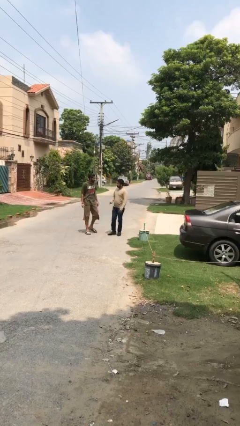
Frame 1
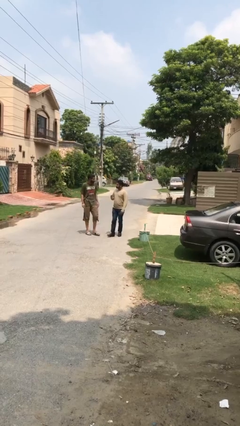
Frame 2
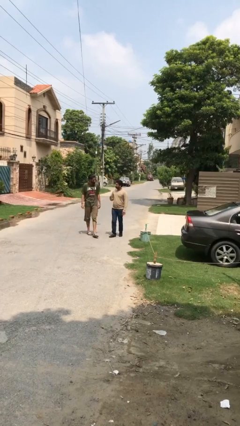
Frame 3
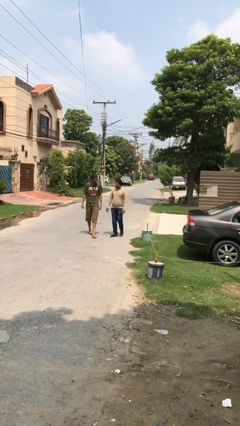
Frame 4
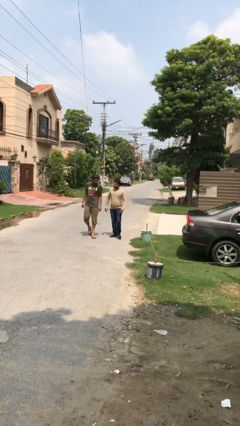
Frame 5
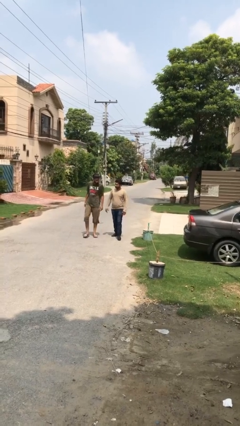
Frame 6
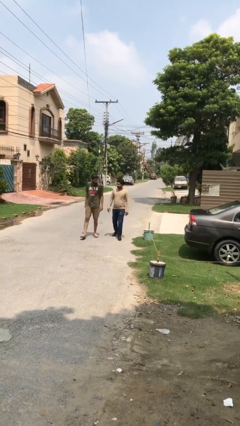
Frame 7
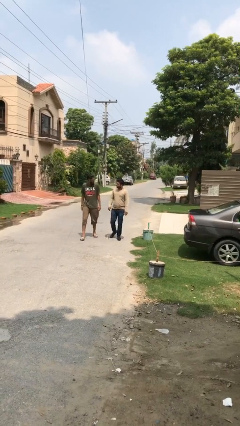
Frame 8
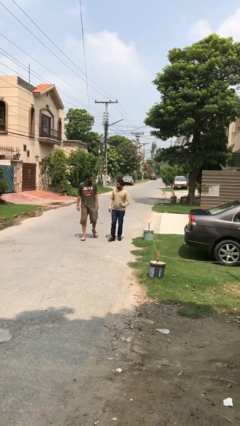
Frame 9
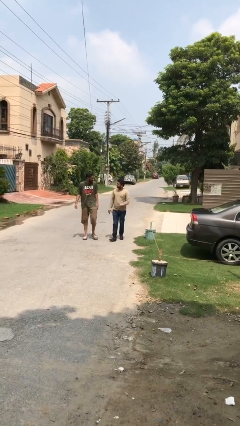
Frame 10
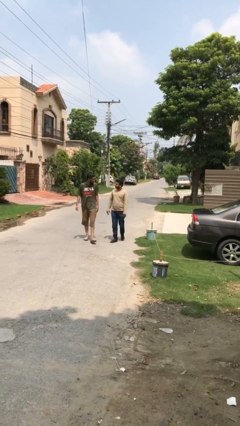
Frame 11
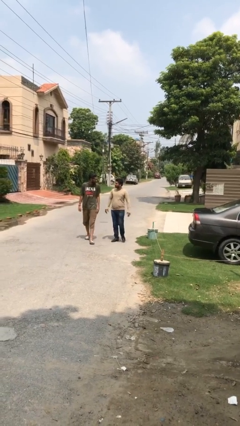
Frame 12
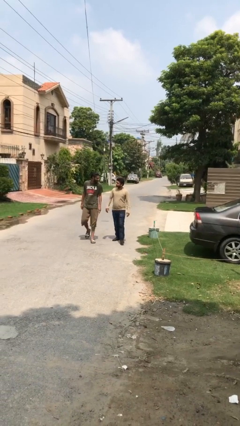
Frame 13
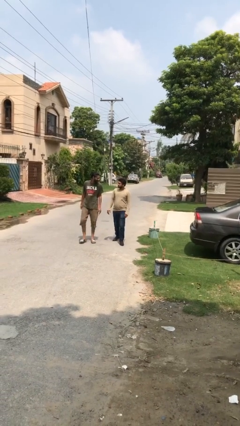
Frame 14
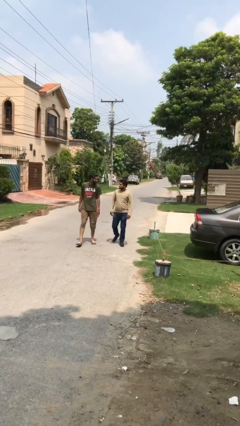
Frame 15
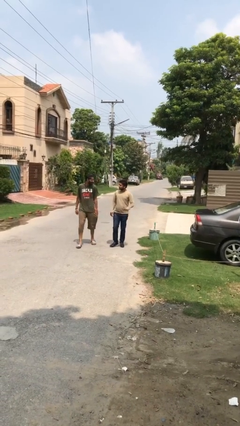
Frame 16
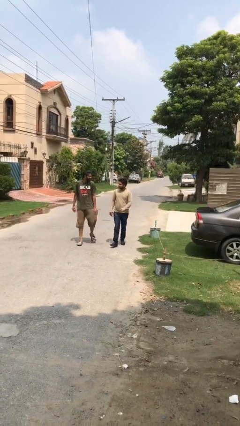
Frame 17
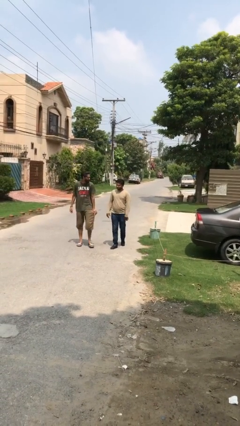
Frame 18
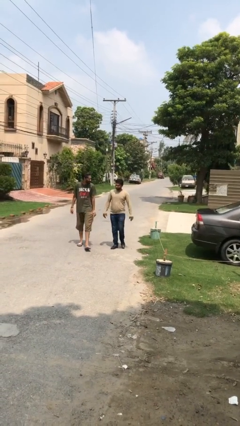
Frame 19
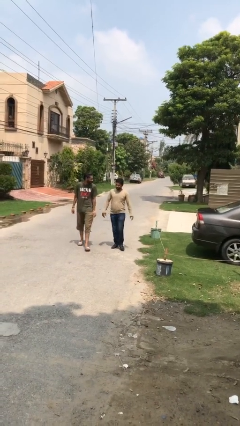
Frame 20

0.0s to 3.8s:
person talks to person

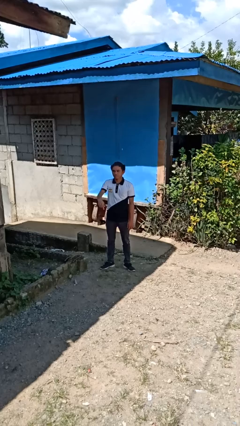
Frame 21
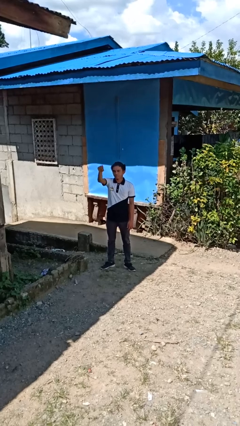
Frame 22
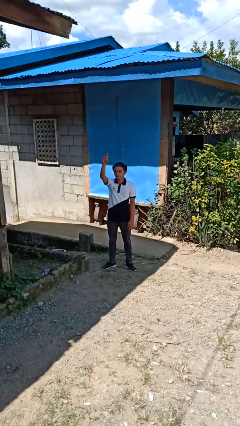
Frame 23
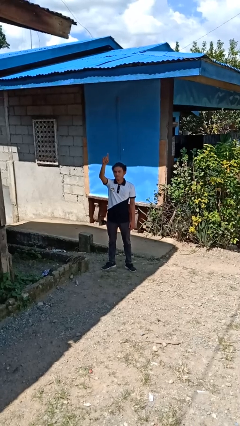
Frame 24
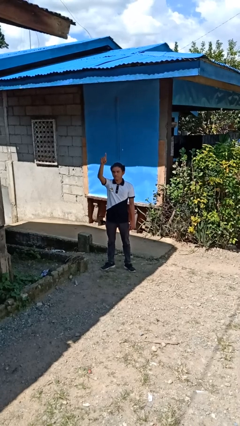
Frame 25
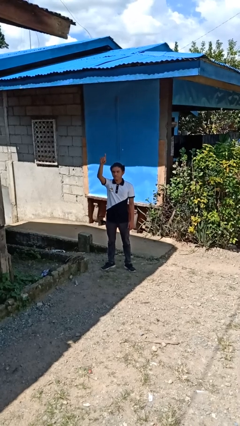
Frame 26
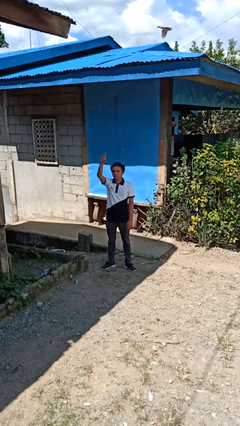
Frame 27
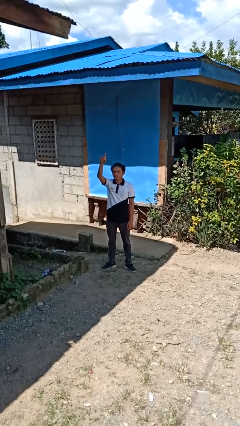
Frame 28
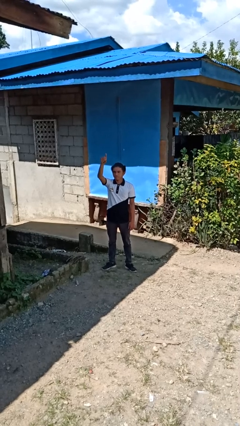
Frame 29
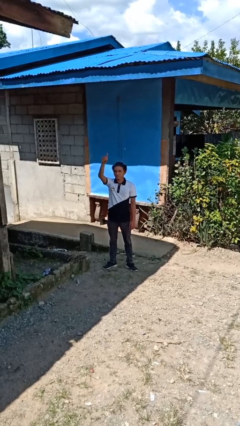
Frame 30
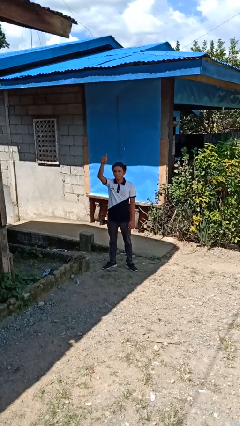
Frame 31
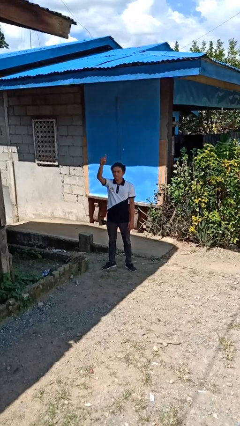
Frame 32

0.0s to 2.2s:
person gestures swipe up

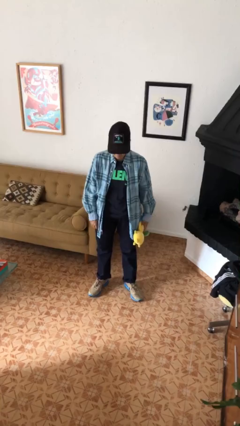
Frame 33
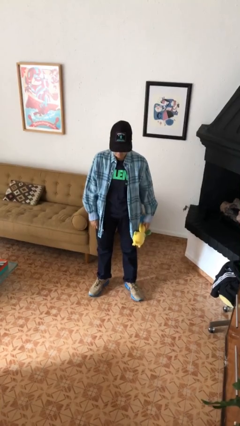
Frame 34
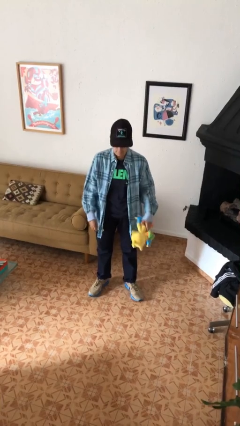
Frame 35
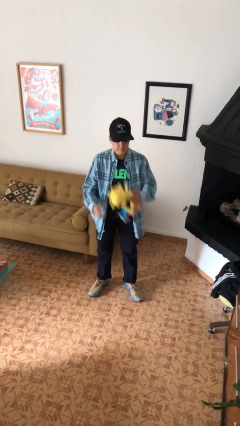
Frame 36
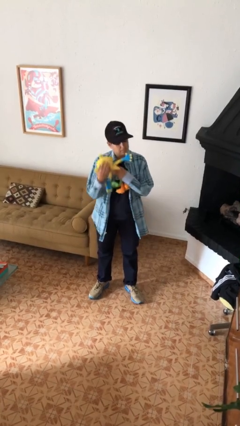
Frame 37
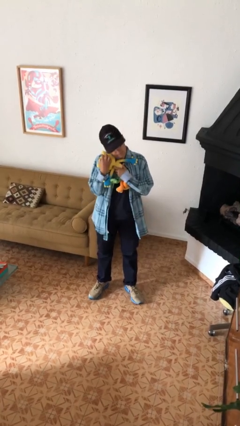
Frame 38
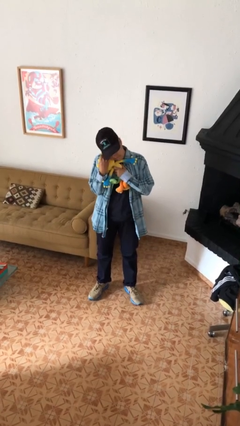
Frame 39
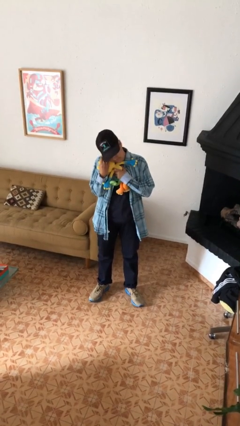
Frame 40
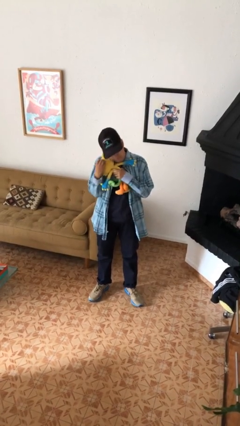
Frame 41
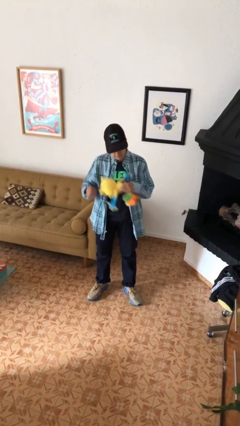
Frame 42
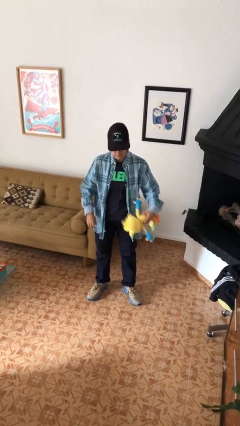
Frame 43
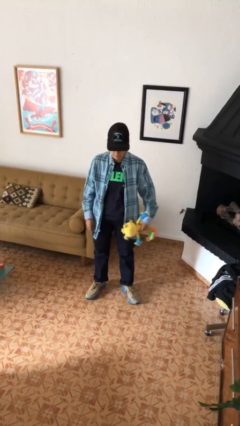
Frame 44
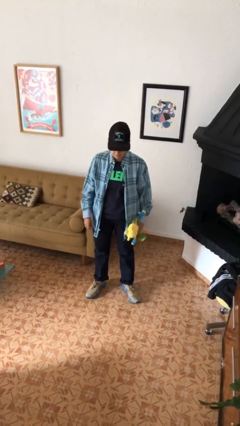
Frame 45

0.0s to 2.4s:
person hugs stuffed animal

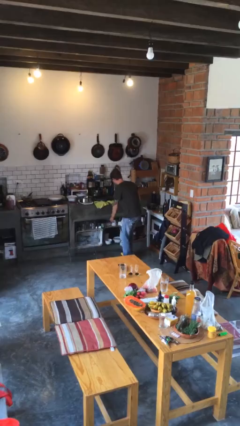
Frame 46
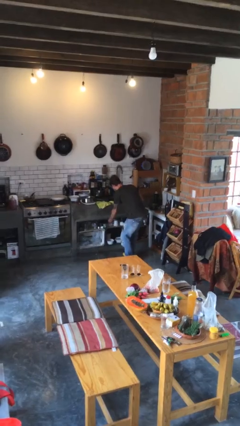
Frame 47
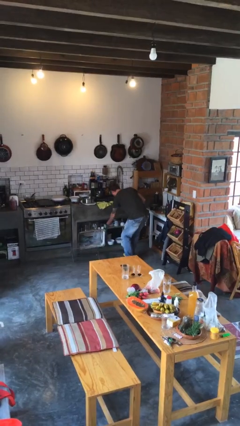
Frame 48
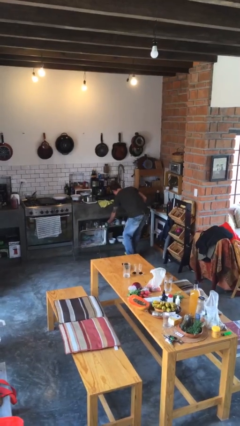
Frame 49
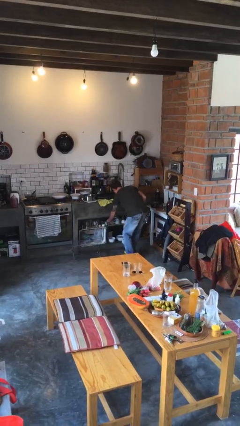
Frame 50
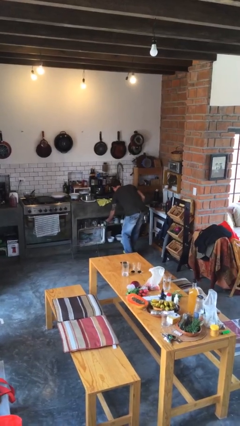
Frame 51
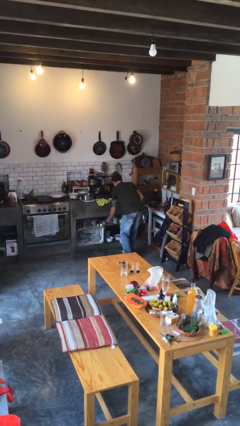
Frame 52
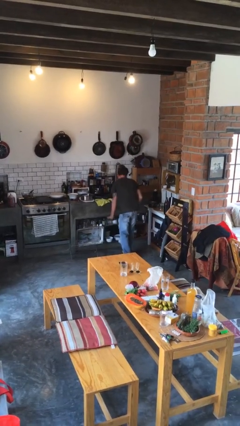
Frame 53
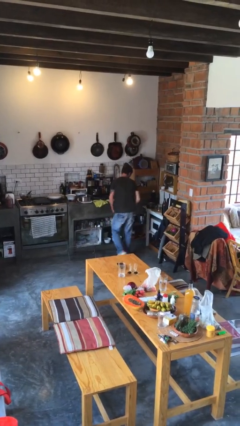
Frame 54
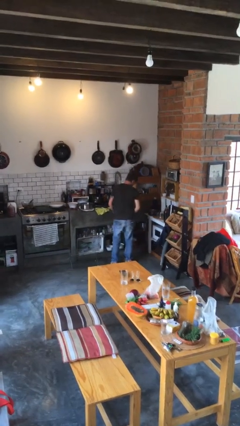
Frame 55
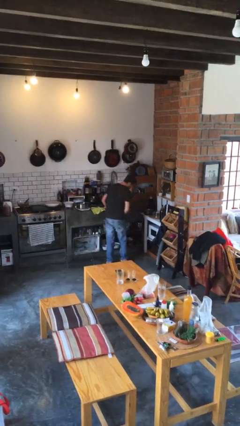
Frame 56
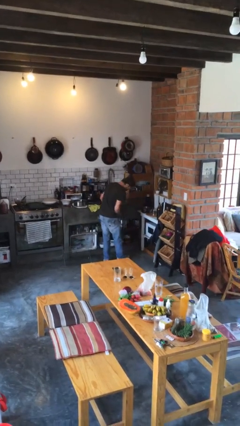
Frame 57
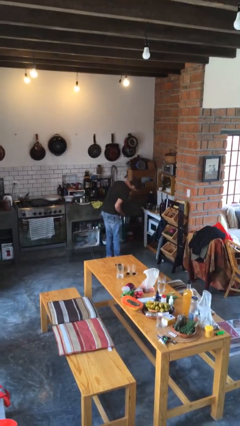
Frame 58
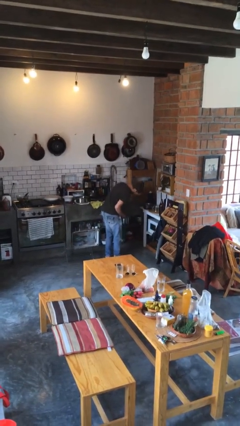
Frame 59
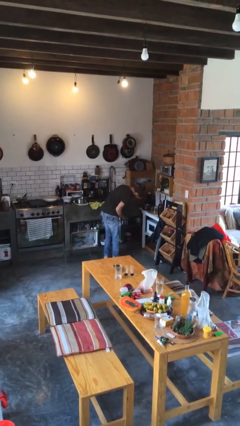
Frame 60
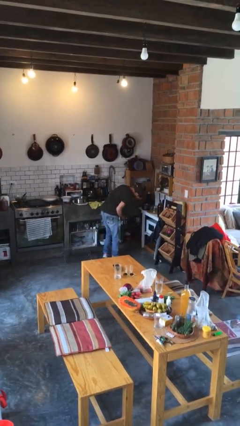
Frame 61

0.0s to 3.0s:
person picks up object from cabinet

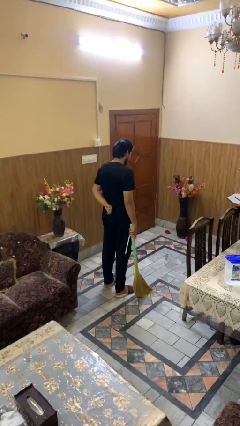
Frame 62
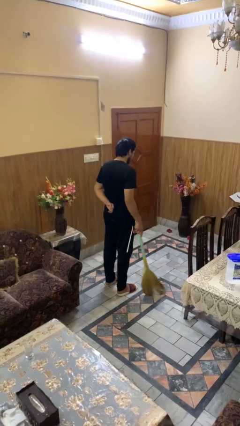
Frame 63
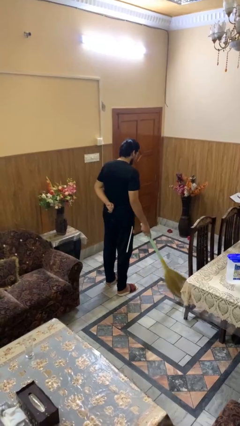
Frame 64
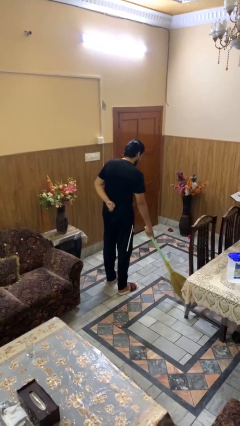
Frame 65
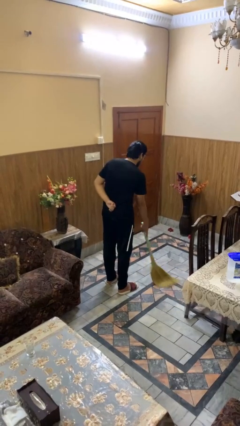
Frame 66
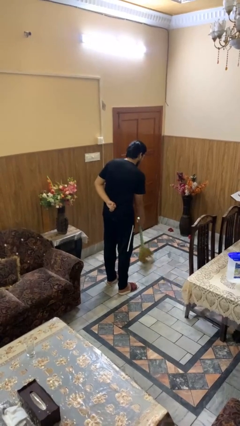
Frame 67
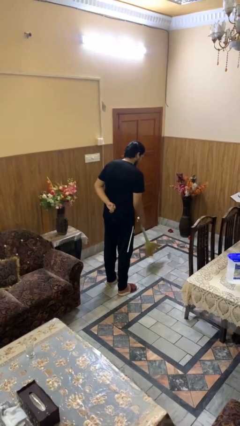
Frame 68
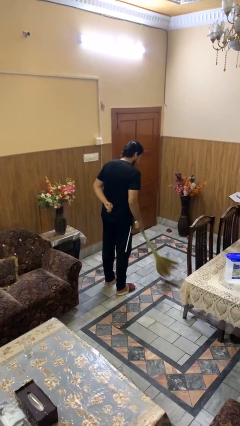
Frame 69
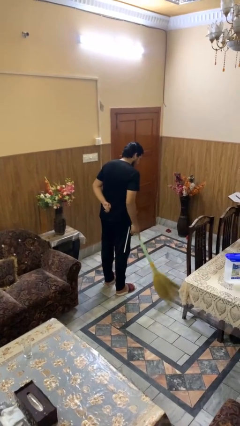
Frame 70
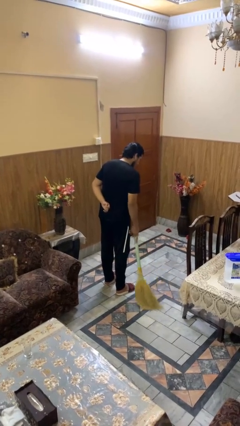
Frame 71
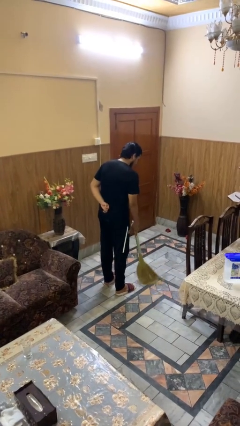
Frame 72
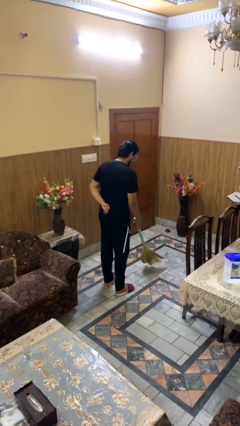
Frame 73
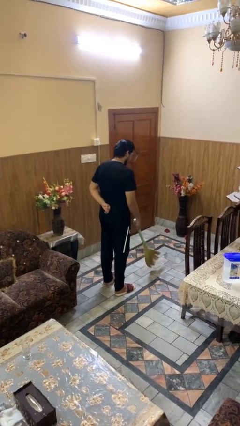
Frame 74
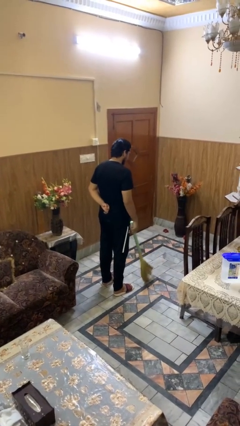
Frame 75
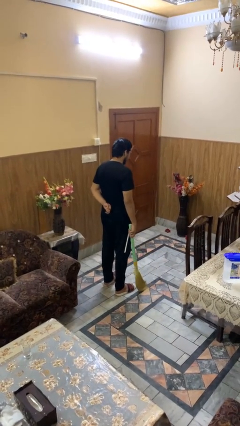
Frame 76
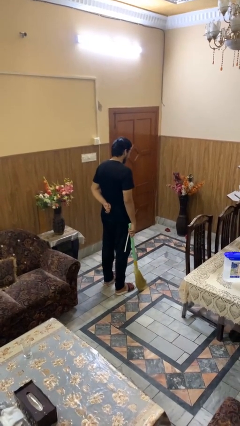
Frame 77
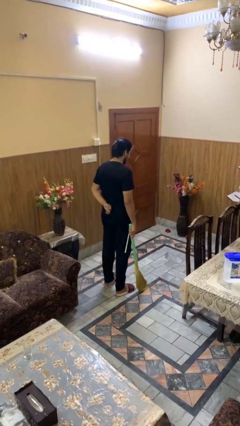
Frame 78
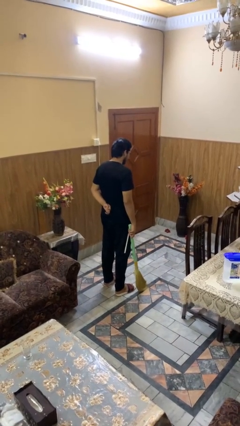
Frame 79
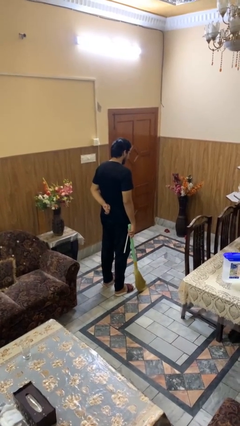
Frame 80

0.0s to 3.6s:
person sweeps floor

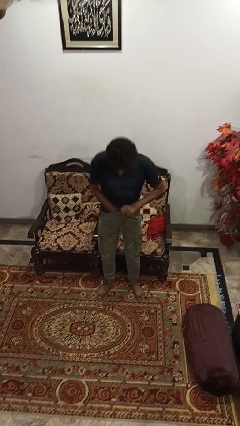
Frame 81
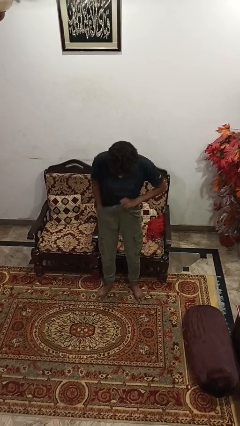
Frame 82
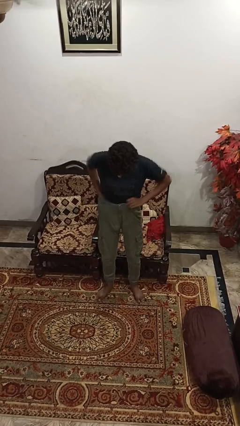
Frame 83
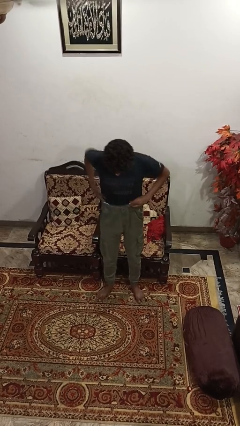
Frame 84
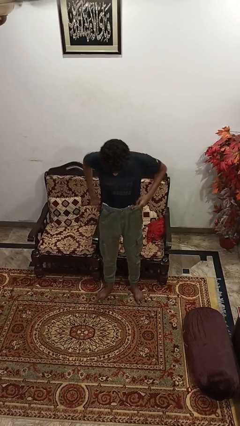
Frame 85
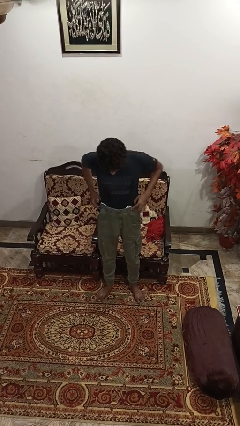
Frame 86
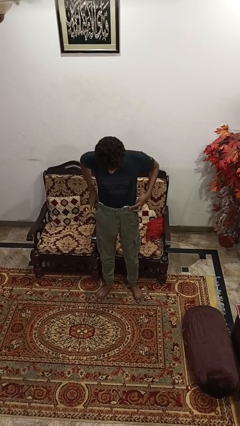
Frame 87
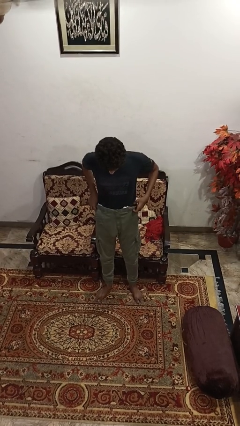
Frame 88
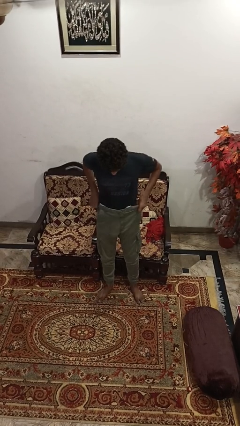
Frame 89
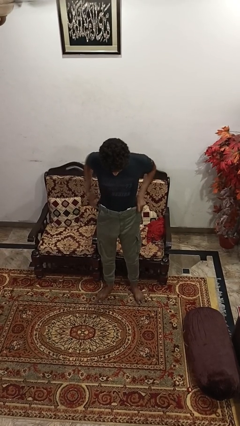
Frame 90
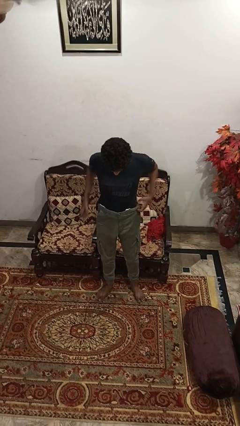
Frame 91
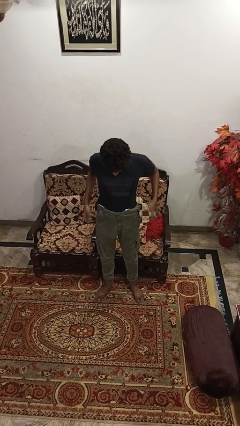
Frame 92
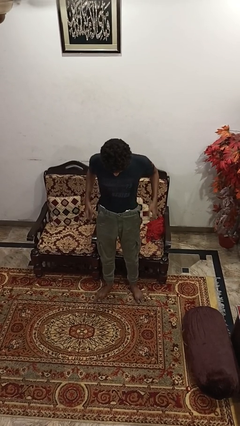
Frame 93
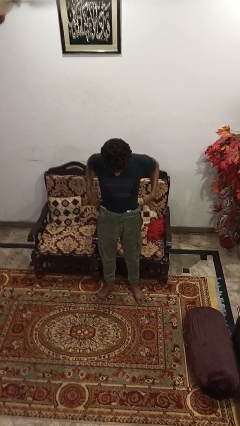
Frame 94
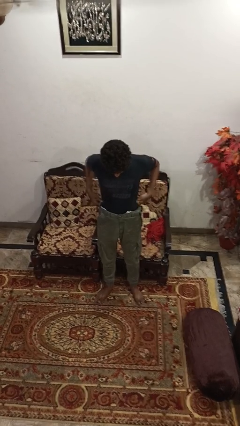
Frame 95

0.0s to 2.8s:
person tucks in shirt
